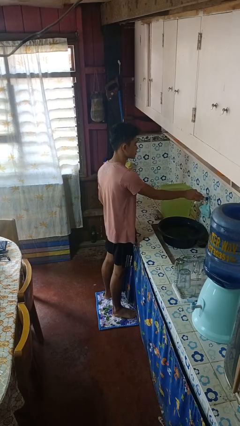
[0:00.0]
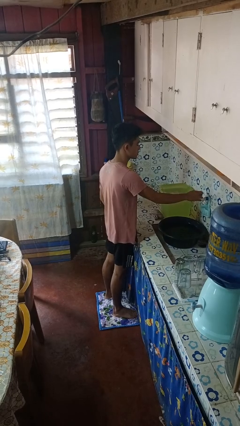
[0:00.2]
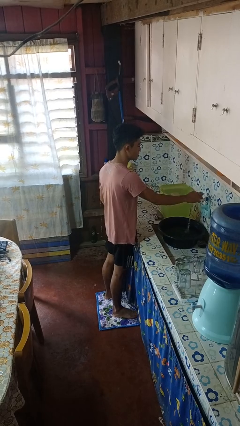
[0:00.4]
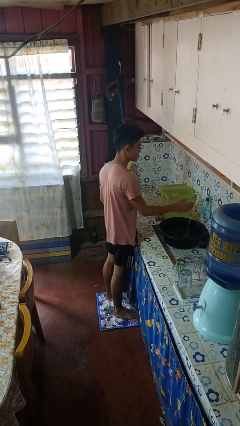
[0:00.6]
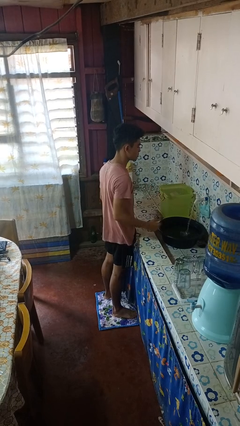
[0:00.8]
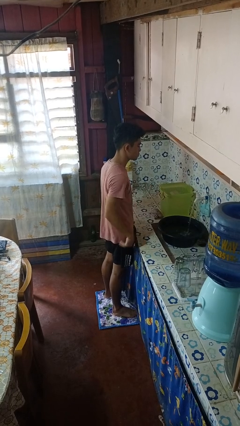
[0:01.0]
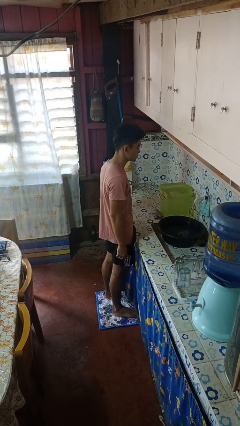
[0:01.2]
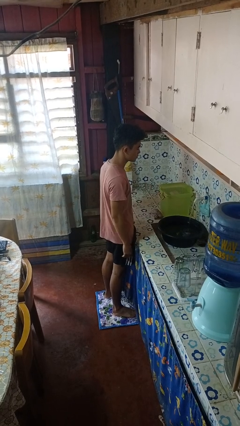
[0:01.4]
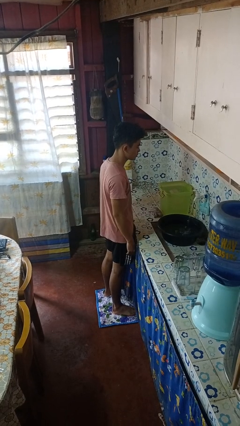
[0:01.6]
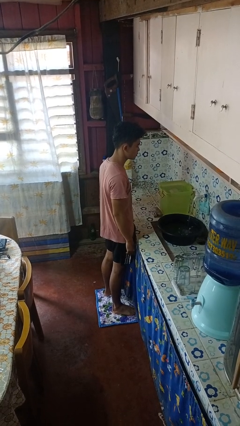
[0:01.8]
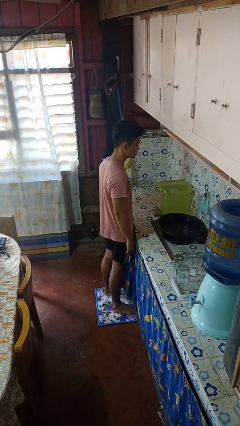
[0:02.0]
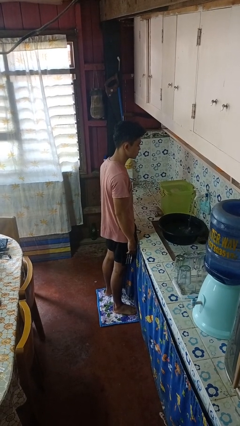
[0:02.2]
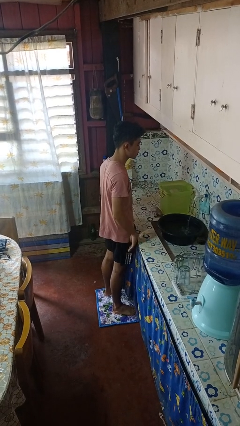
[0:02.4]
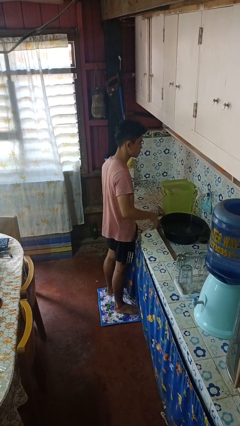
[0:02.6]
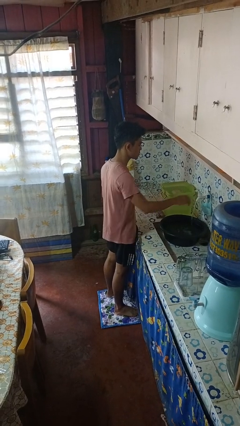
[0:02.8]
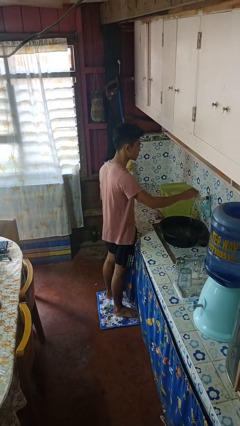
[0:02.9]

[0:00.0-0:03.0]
person turns on faucet

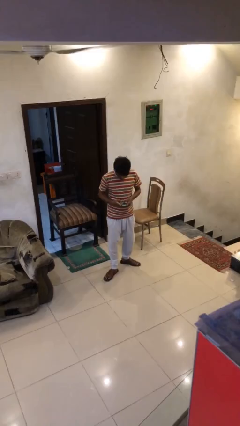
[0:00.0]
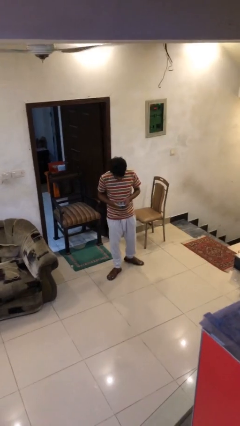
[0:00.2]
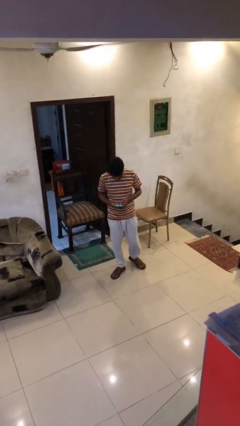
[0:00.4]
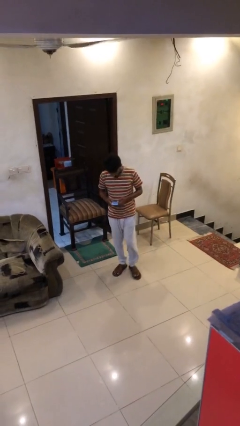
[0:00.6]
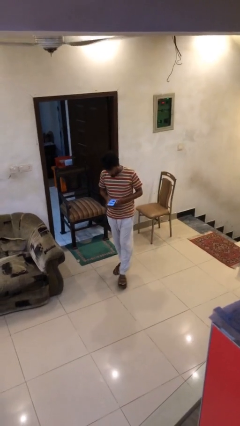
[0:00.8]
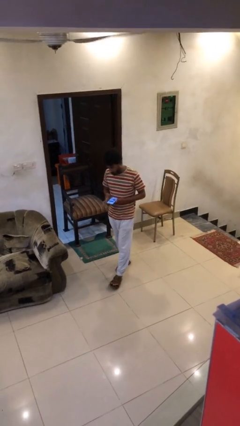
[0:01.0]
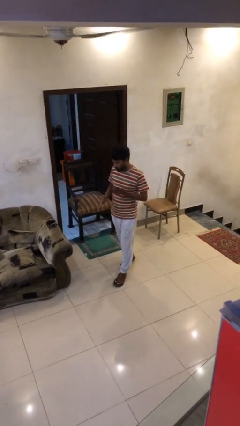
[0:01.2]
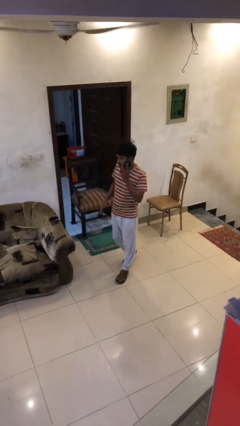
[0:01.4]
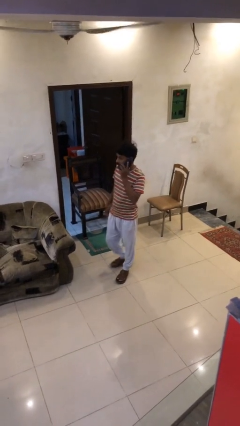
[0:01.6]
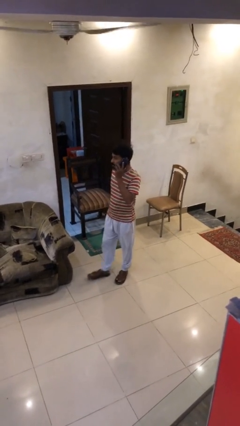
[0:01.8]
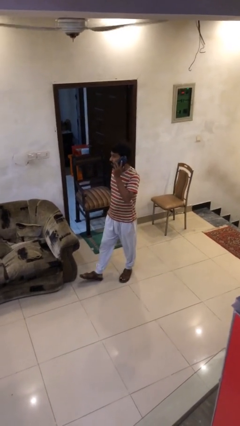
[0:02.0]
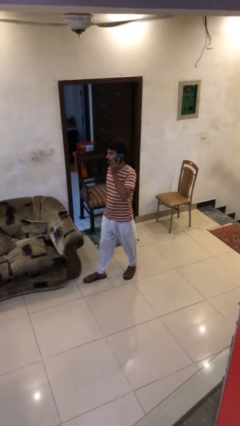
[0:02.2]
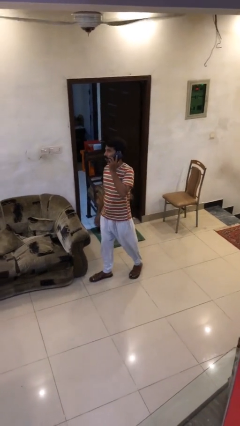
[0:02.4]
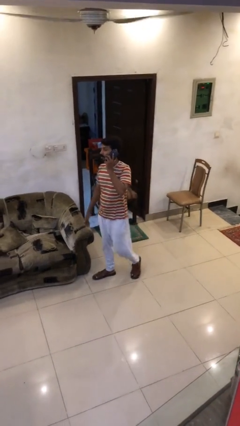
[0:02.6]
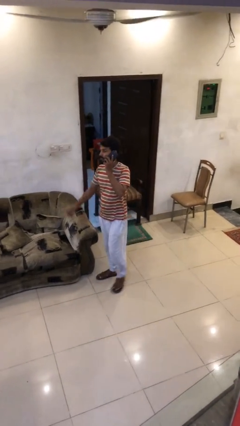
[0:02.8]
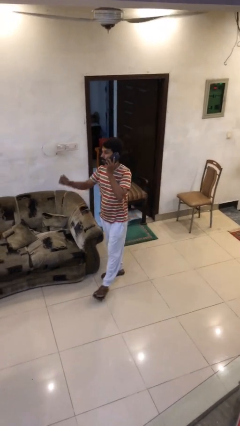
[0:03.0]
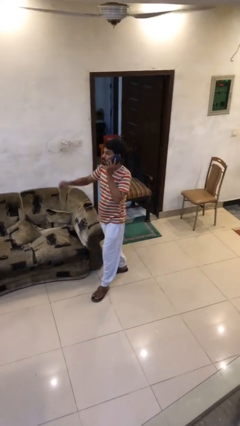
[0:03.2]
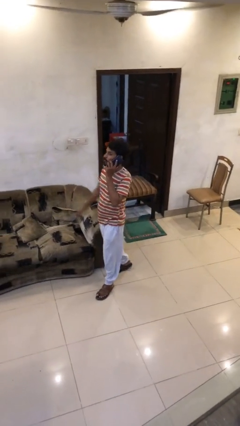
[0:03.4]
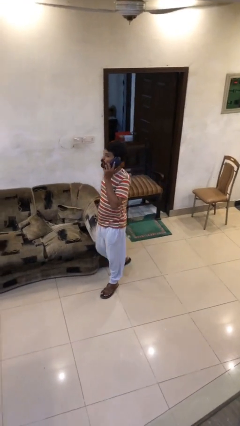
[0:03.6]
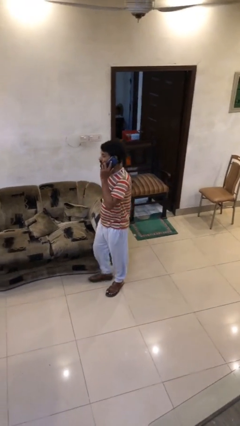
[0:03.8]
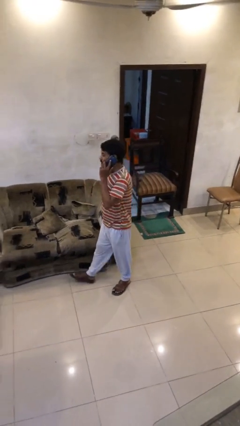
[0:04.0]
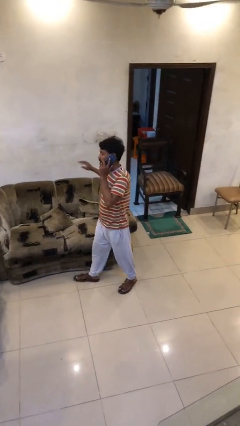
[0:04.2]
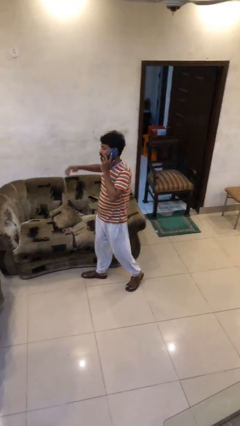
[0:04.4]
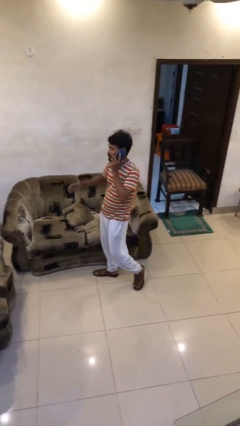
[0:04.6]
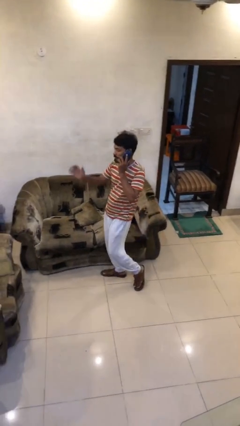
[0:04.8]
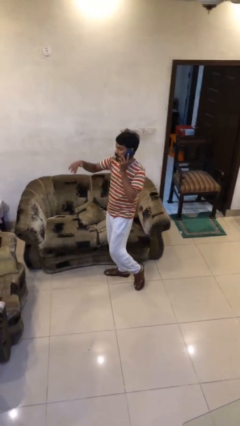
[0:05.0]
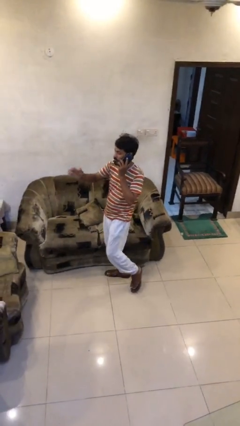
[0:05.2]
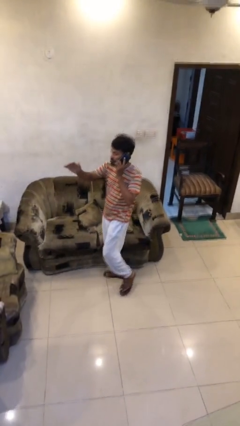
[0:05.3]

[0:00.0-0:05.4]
person talks on phone

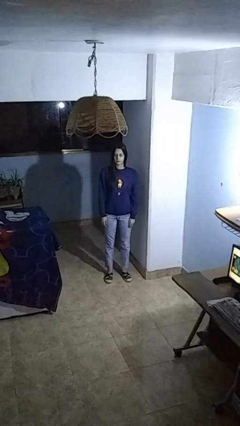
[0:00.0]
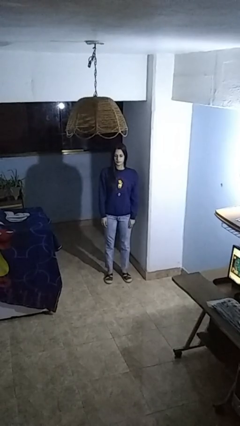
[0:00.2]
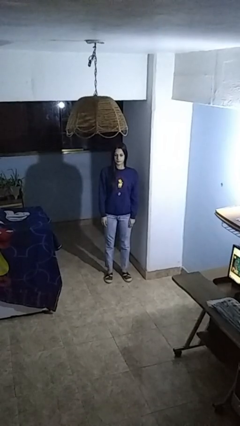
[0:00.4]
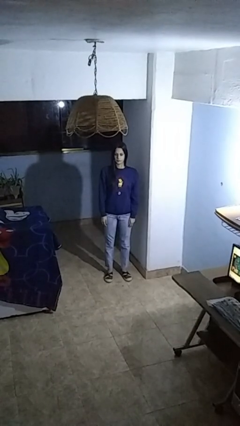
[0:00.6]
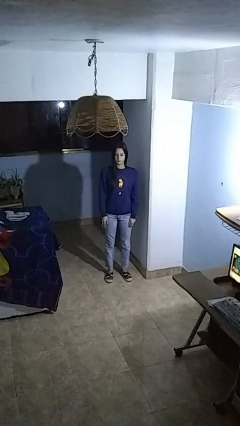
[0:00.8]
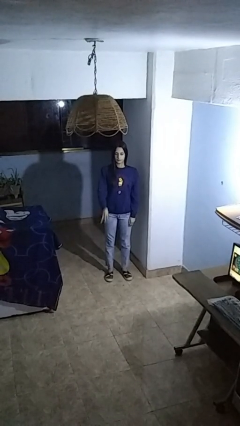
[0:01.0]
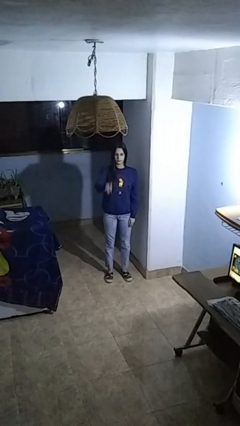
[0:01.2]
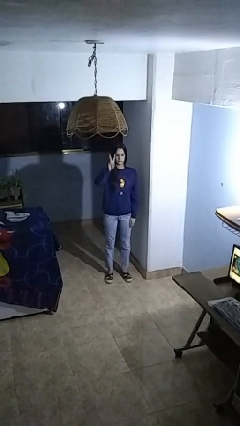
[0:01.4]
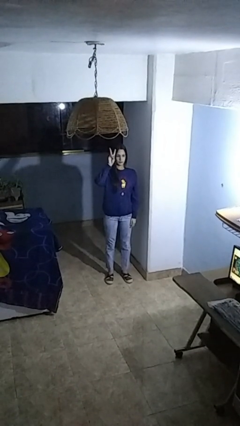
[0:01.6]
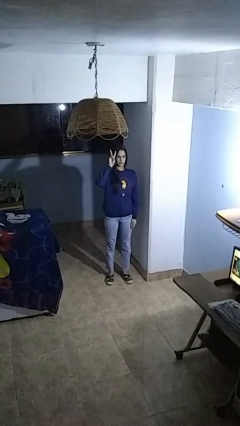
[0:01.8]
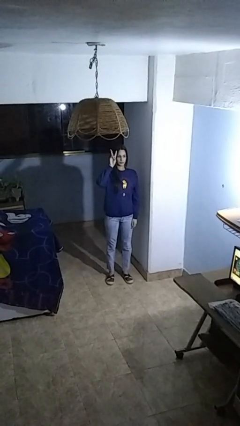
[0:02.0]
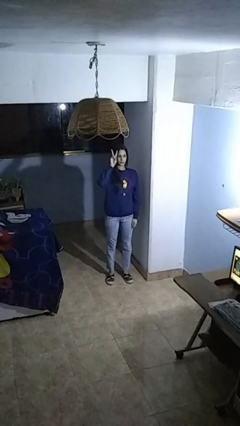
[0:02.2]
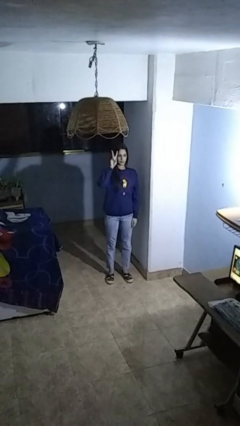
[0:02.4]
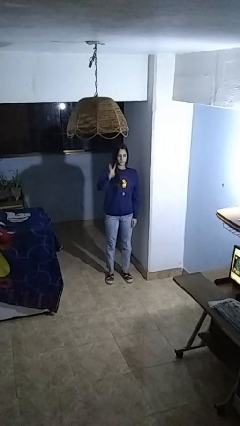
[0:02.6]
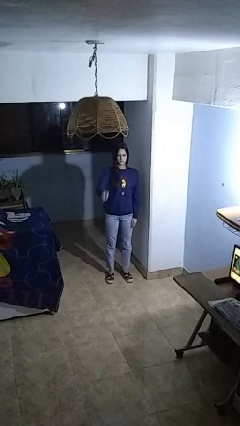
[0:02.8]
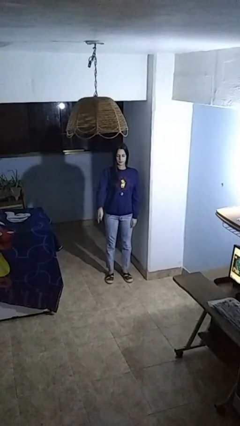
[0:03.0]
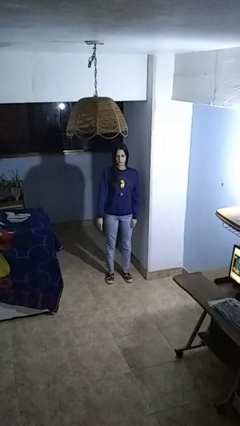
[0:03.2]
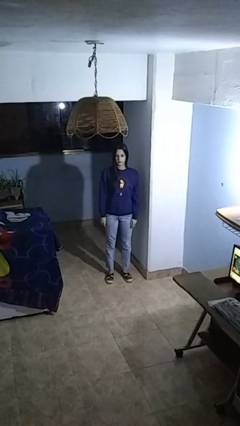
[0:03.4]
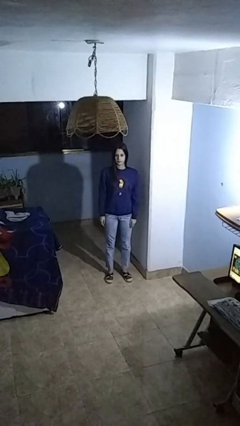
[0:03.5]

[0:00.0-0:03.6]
person gestures peace

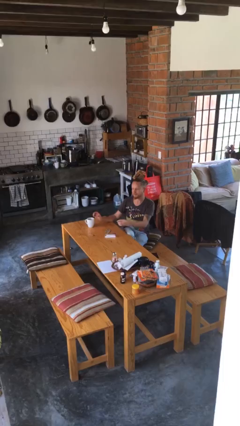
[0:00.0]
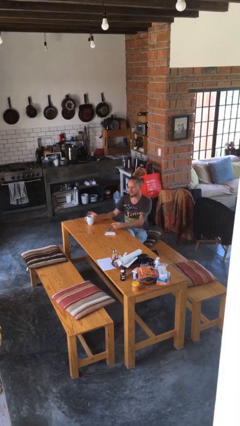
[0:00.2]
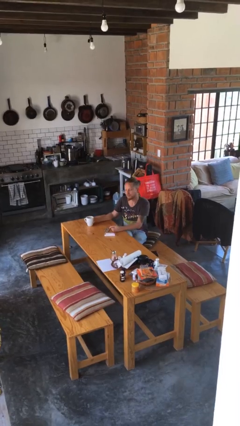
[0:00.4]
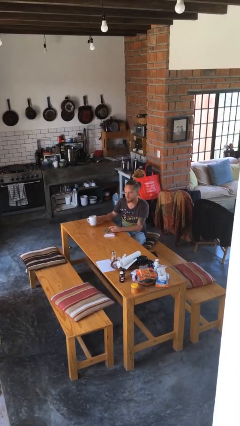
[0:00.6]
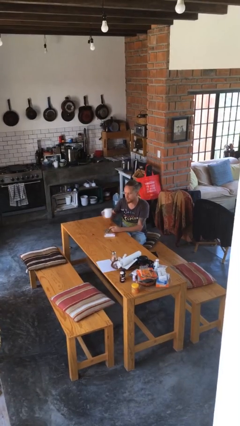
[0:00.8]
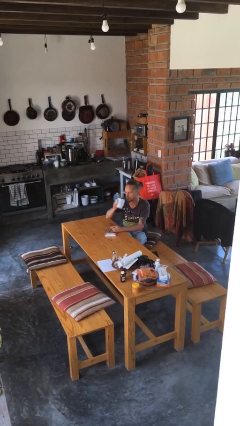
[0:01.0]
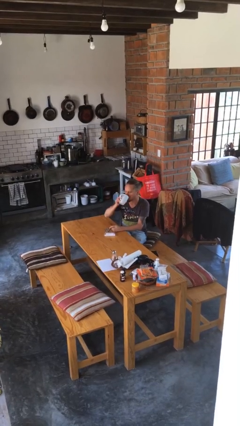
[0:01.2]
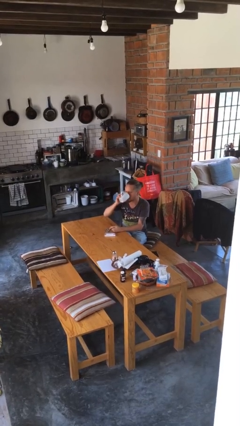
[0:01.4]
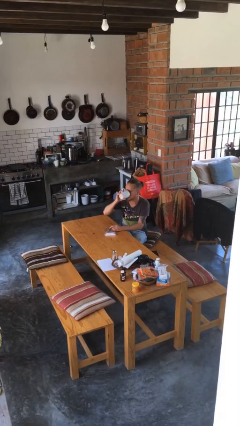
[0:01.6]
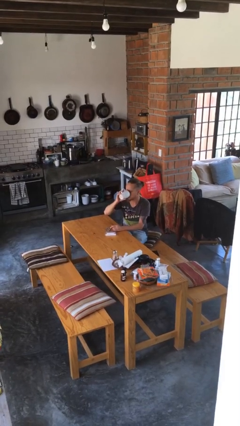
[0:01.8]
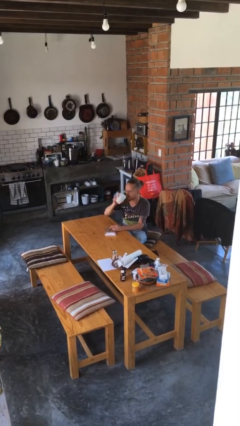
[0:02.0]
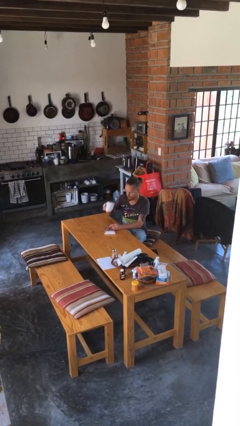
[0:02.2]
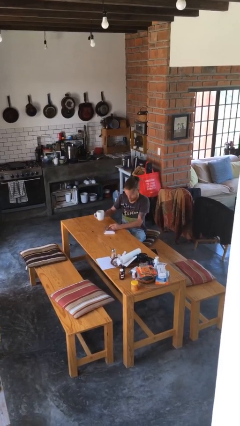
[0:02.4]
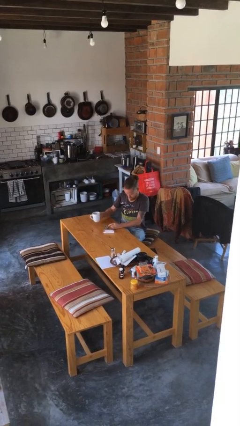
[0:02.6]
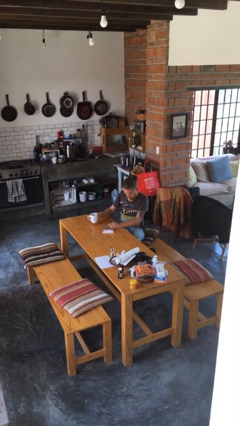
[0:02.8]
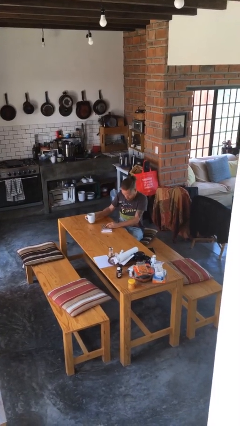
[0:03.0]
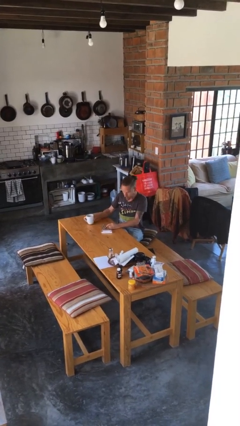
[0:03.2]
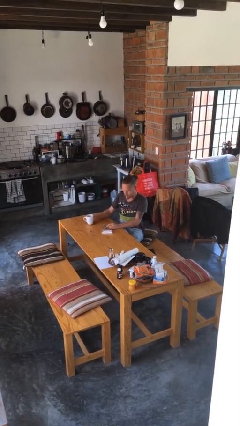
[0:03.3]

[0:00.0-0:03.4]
person drinks from cup

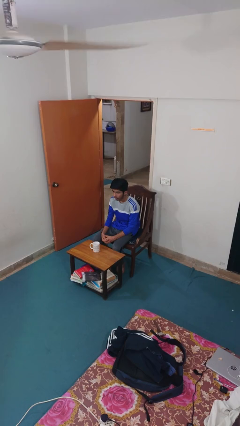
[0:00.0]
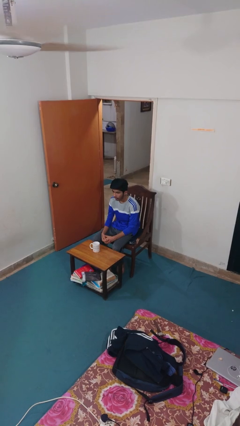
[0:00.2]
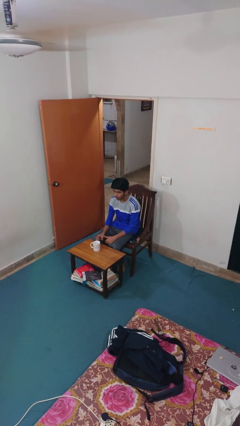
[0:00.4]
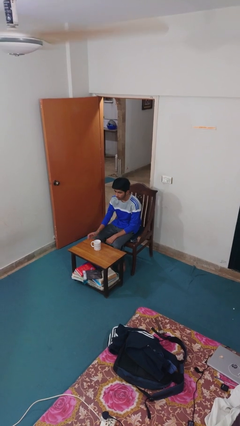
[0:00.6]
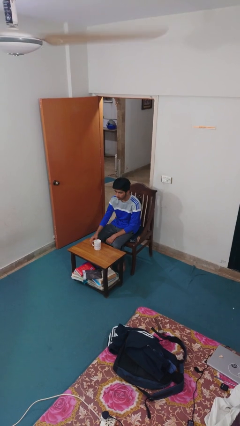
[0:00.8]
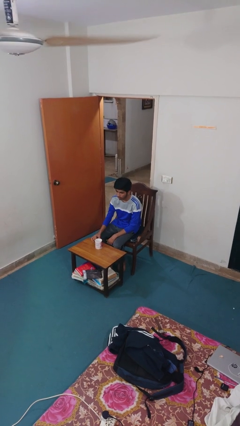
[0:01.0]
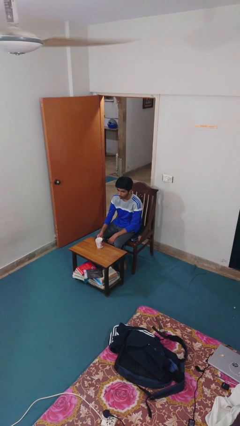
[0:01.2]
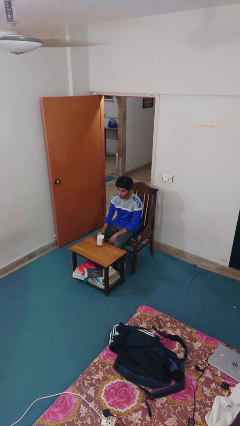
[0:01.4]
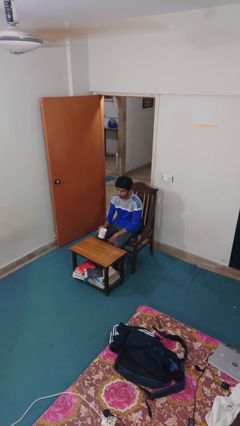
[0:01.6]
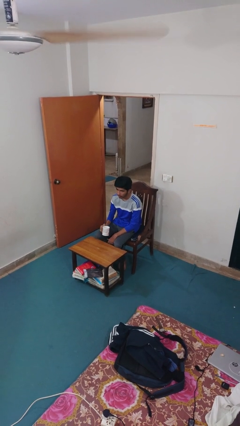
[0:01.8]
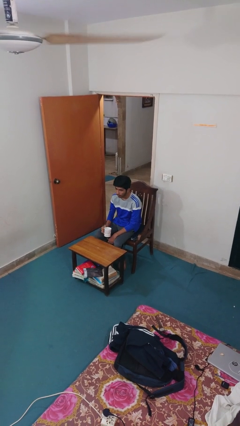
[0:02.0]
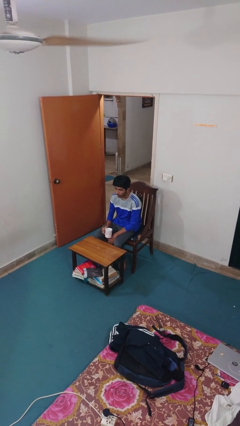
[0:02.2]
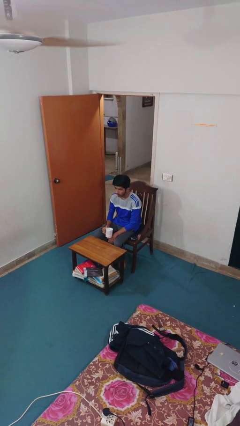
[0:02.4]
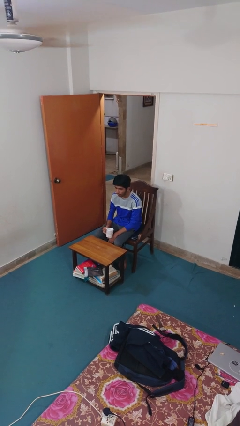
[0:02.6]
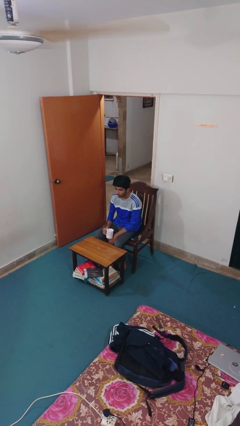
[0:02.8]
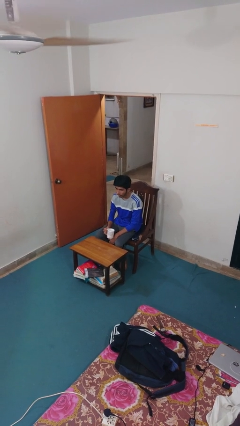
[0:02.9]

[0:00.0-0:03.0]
person picks up object from table
